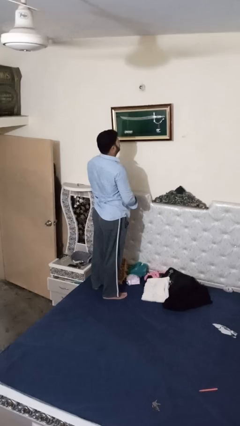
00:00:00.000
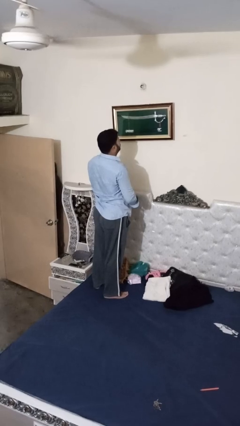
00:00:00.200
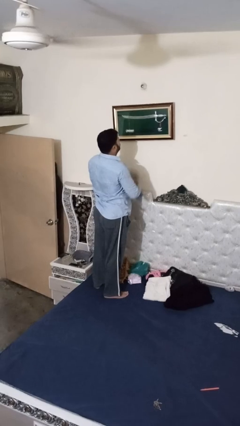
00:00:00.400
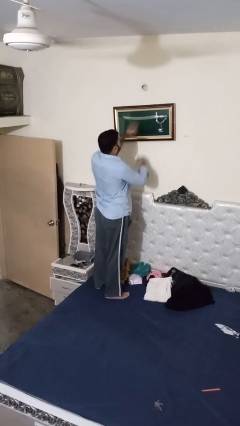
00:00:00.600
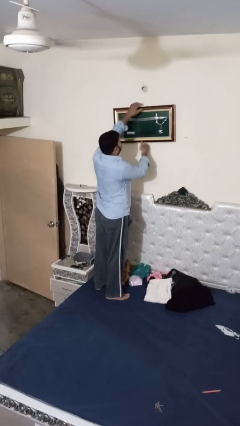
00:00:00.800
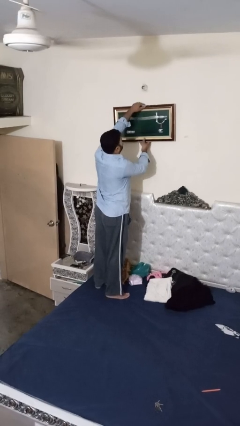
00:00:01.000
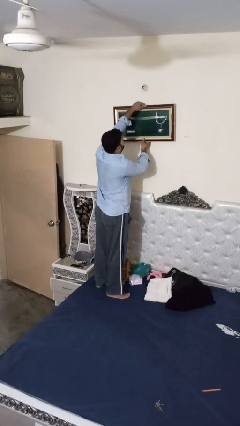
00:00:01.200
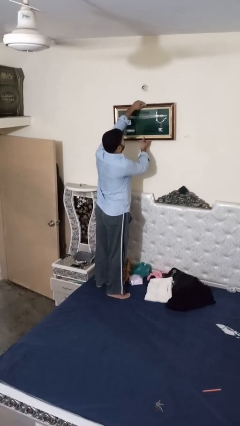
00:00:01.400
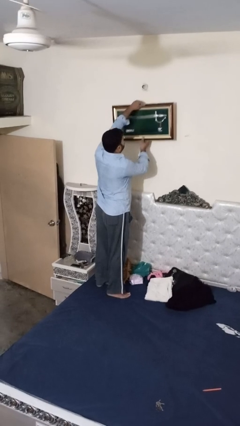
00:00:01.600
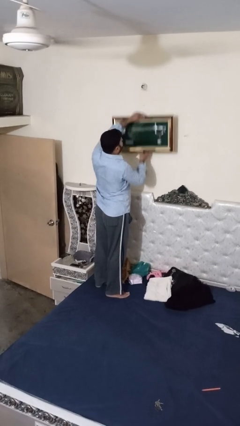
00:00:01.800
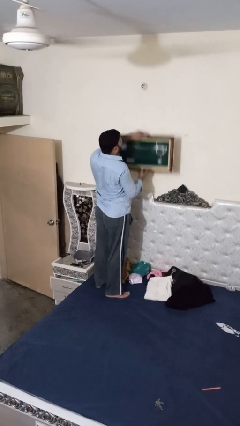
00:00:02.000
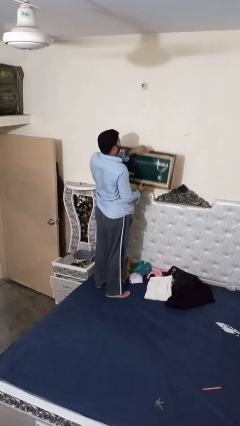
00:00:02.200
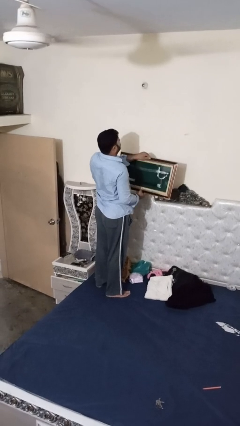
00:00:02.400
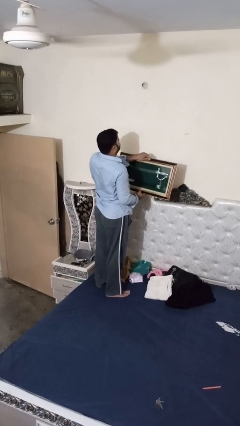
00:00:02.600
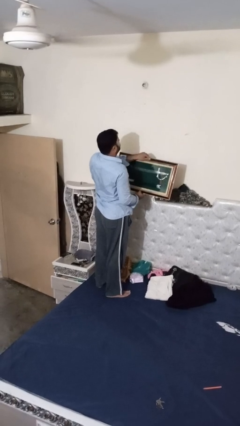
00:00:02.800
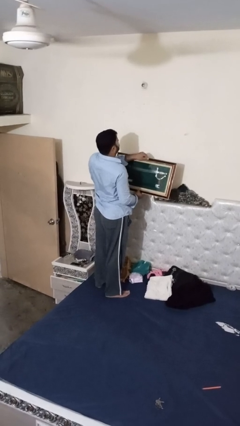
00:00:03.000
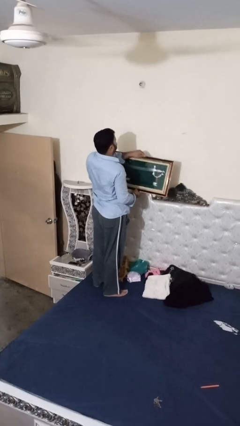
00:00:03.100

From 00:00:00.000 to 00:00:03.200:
person takes down picture frame

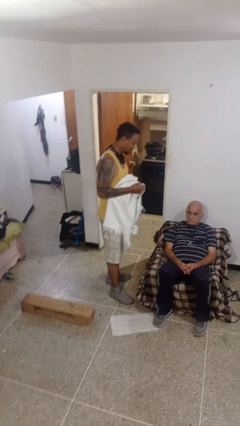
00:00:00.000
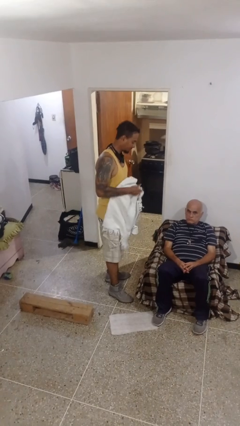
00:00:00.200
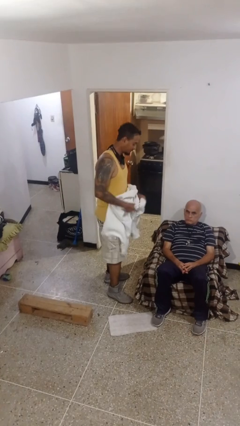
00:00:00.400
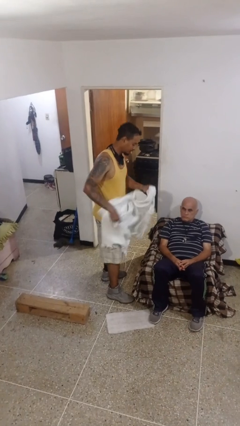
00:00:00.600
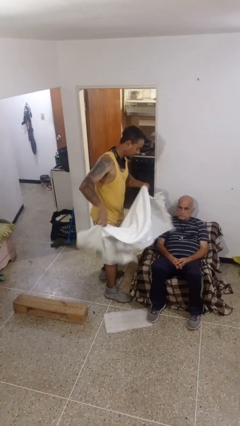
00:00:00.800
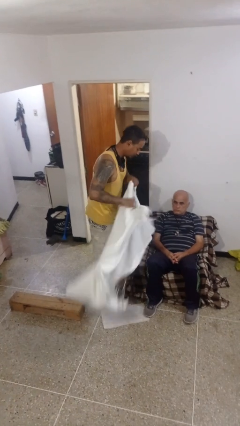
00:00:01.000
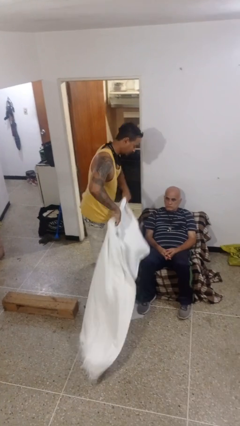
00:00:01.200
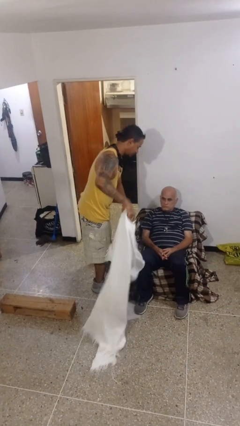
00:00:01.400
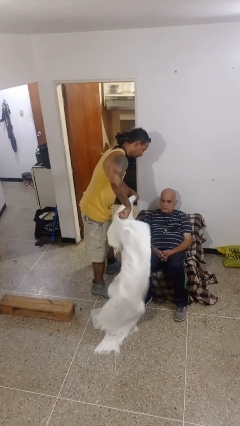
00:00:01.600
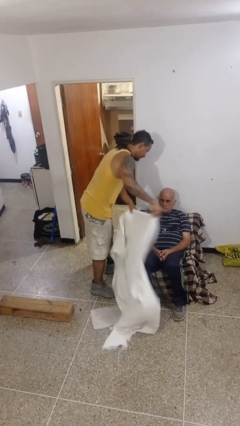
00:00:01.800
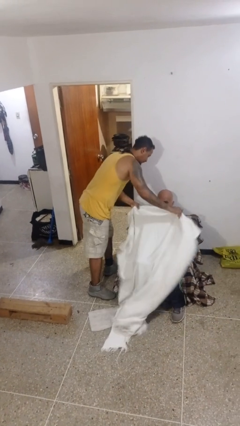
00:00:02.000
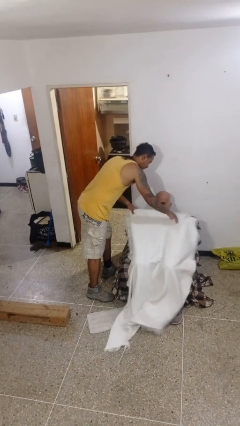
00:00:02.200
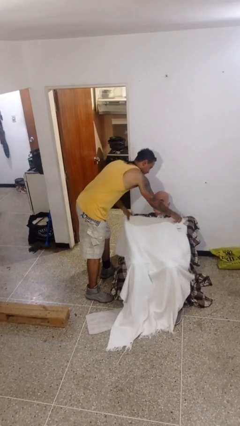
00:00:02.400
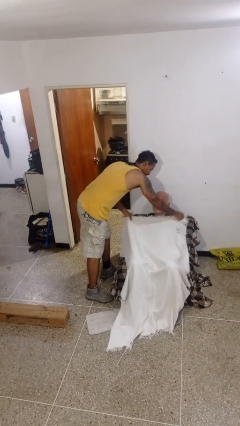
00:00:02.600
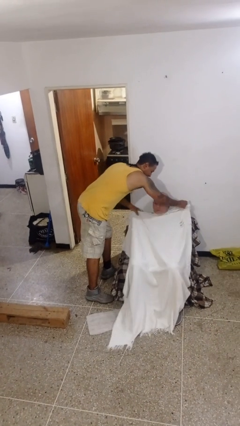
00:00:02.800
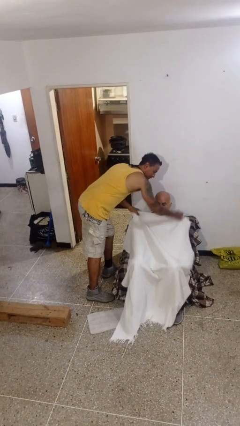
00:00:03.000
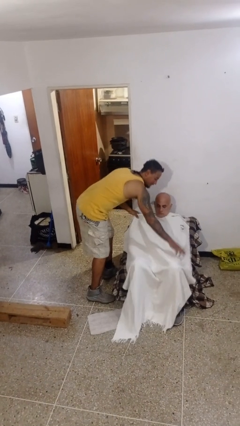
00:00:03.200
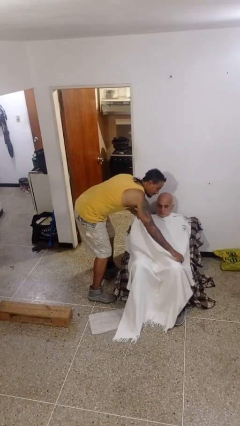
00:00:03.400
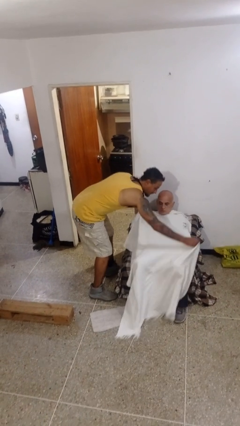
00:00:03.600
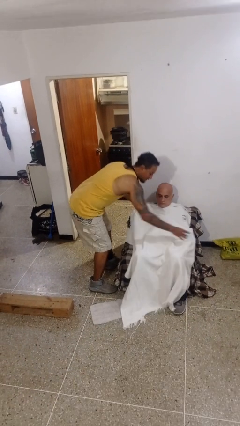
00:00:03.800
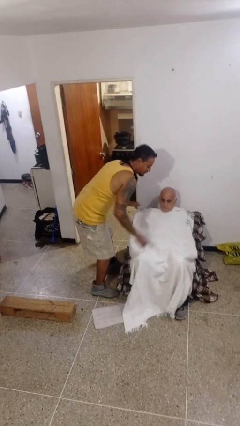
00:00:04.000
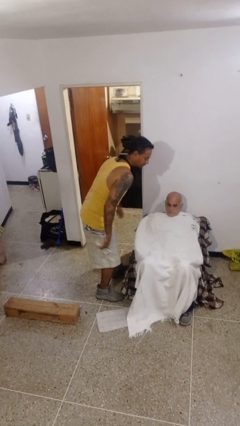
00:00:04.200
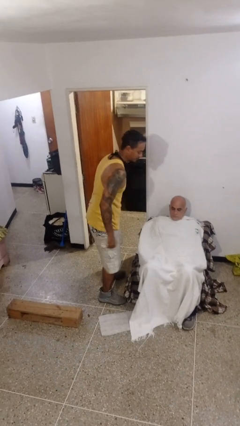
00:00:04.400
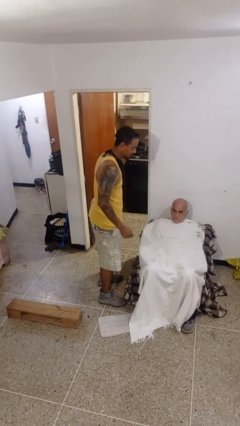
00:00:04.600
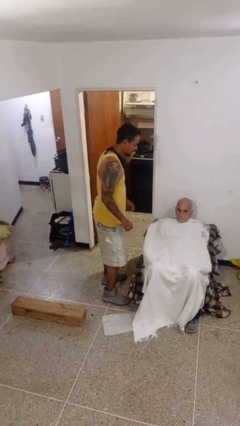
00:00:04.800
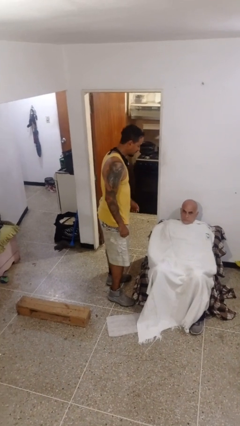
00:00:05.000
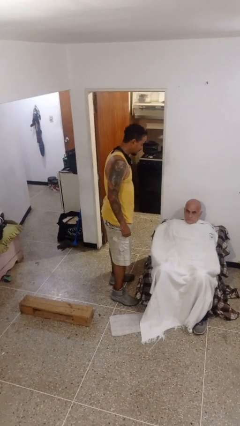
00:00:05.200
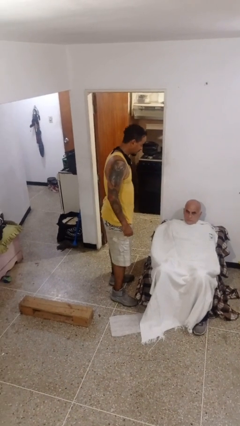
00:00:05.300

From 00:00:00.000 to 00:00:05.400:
person covers friend with blanket

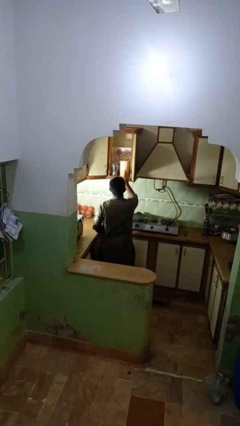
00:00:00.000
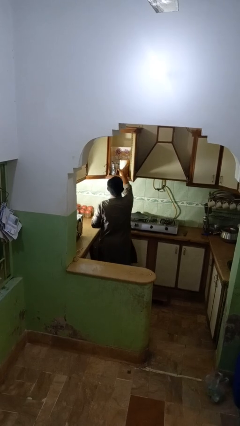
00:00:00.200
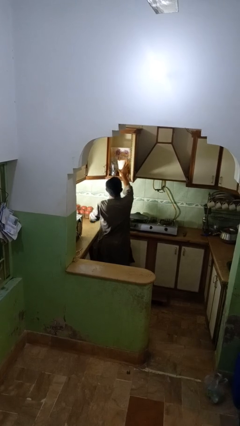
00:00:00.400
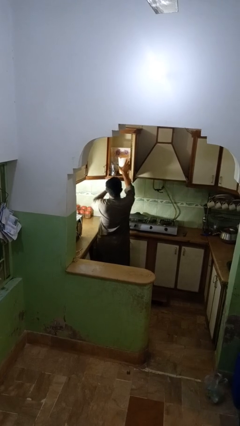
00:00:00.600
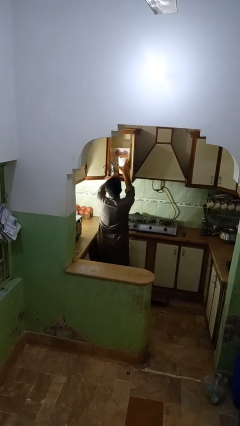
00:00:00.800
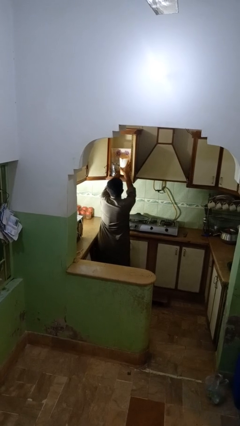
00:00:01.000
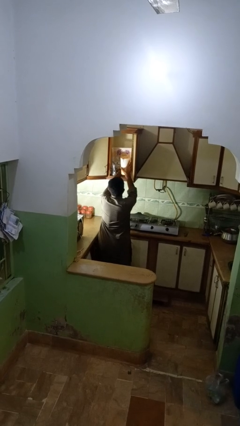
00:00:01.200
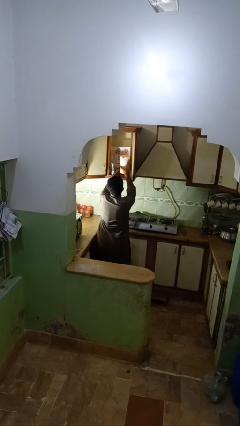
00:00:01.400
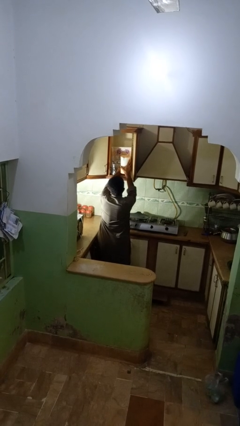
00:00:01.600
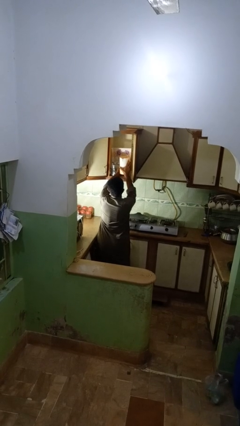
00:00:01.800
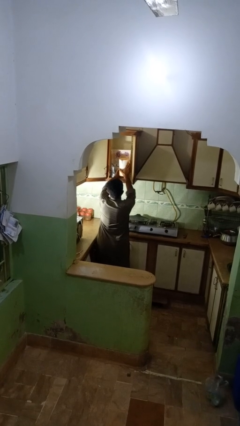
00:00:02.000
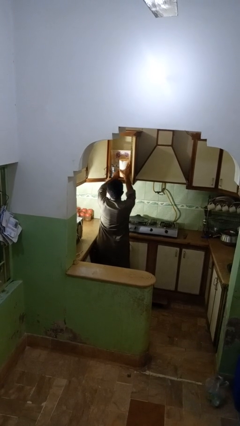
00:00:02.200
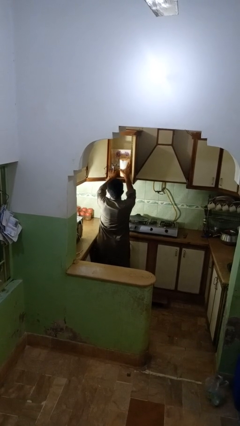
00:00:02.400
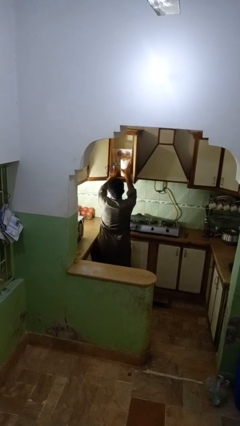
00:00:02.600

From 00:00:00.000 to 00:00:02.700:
person searches in kitchen drawer

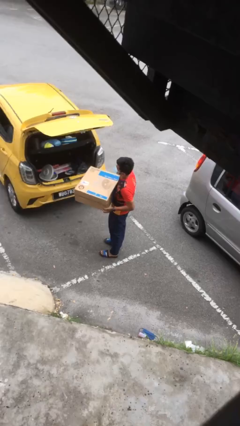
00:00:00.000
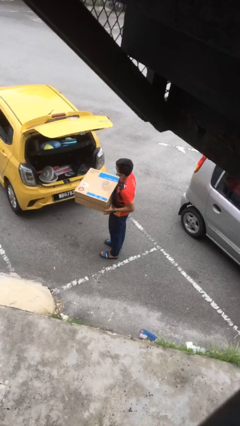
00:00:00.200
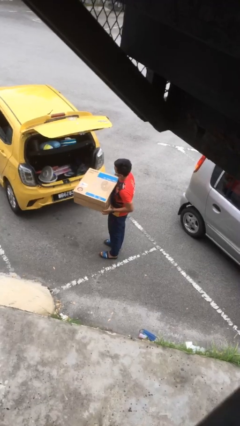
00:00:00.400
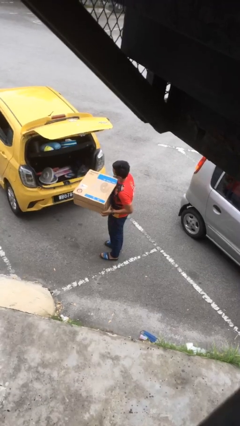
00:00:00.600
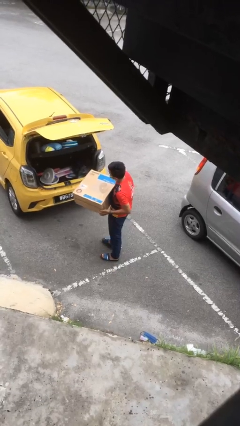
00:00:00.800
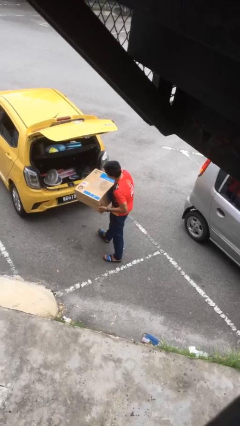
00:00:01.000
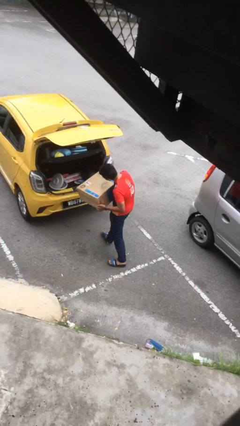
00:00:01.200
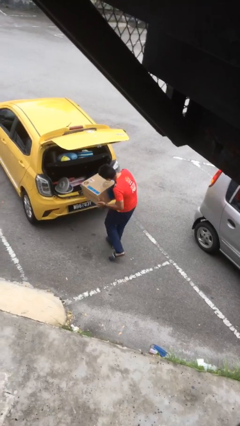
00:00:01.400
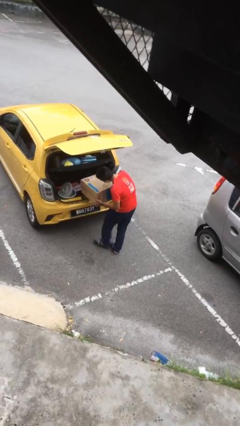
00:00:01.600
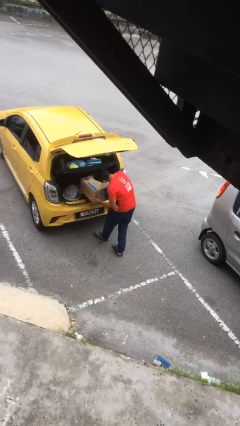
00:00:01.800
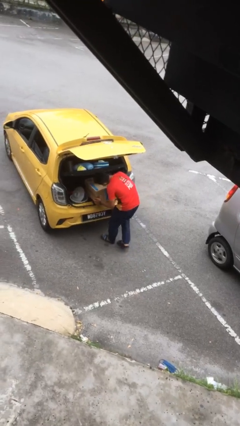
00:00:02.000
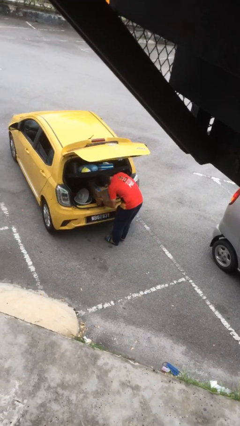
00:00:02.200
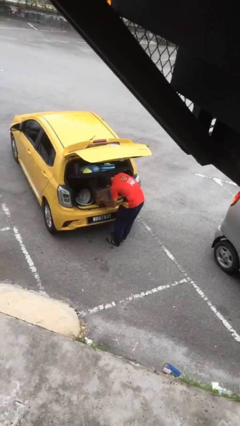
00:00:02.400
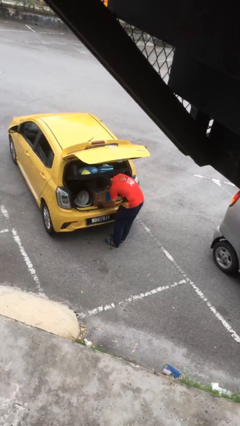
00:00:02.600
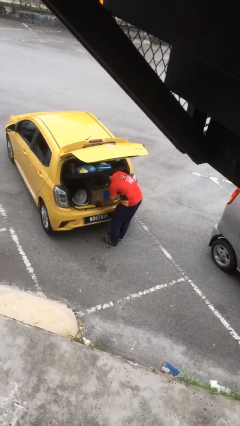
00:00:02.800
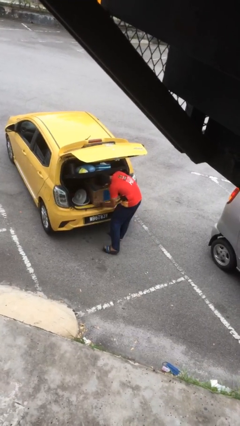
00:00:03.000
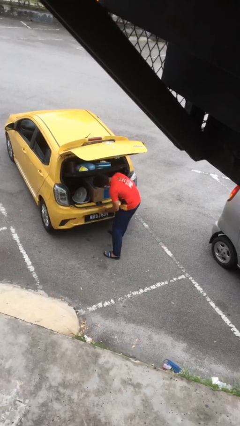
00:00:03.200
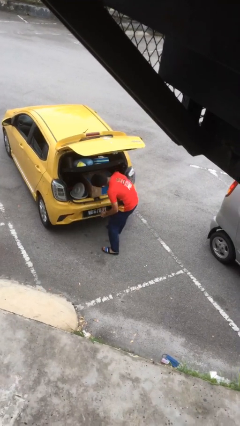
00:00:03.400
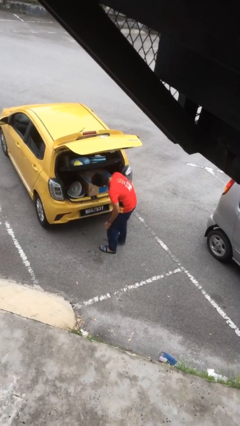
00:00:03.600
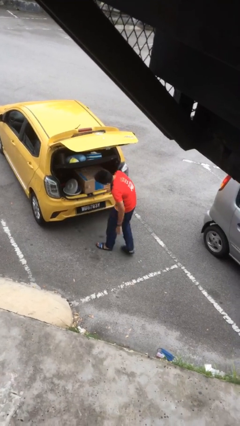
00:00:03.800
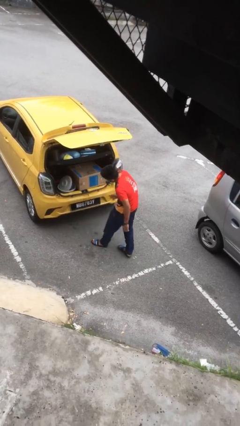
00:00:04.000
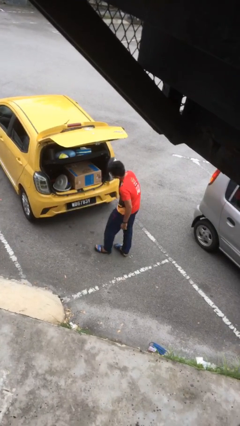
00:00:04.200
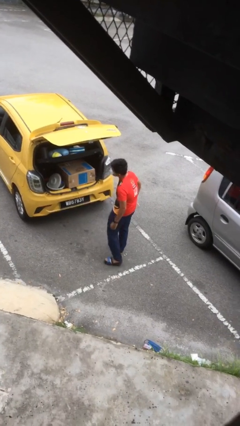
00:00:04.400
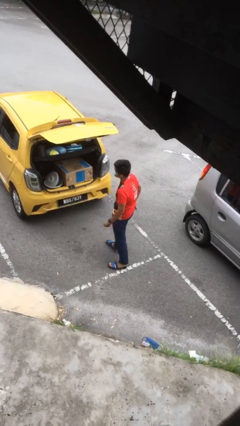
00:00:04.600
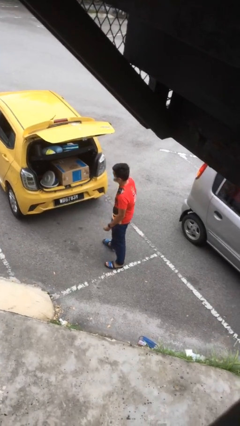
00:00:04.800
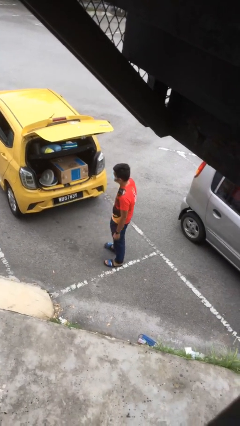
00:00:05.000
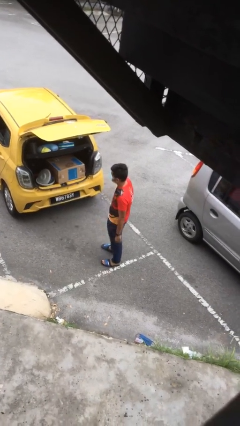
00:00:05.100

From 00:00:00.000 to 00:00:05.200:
person loads car

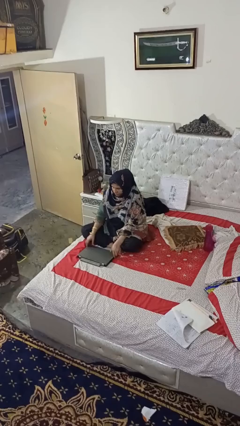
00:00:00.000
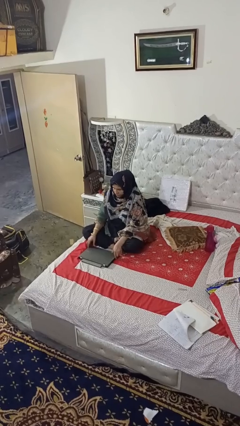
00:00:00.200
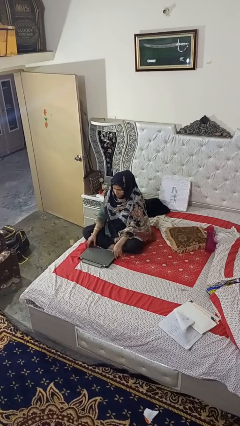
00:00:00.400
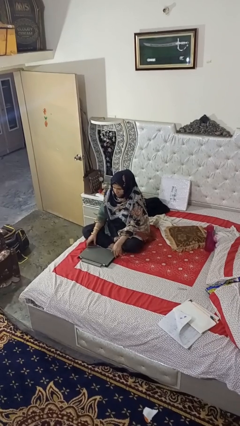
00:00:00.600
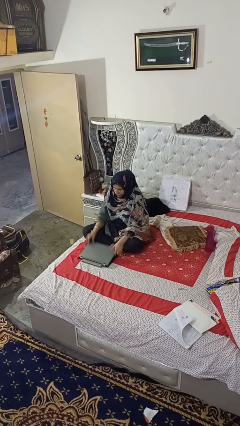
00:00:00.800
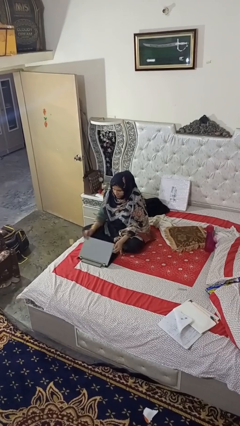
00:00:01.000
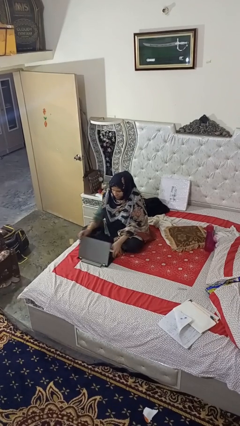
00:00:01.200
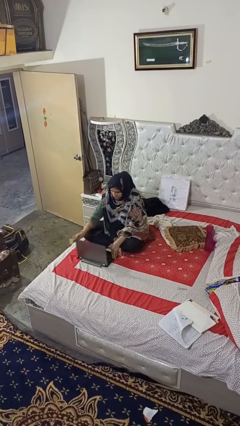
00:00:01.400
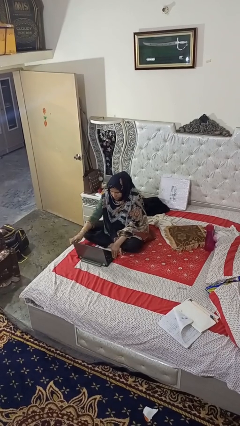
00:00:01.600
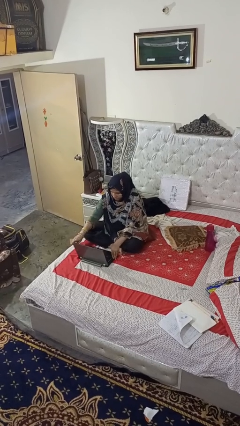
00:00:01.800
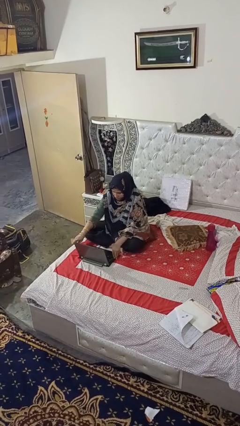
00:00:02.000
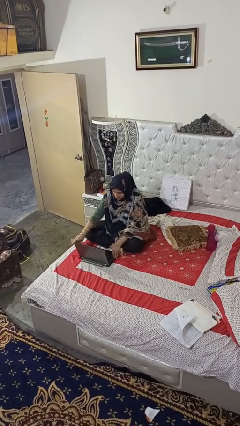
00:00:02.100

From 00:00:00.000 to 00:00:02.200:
person opens laptop
